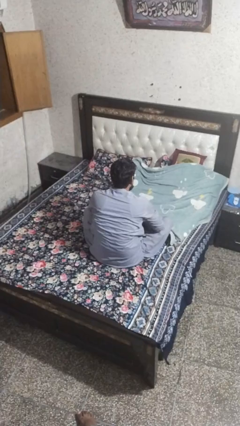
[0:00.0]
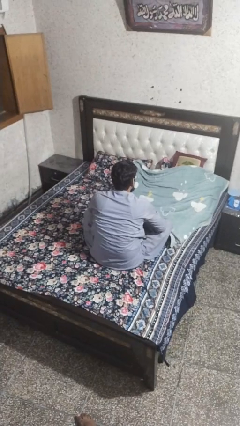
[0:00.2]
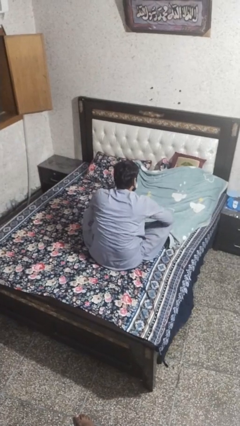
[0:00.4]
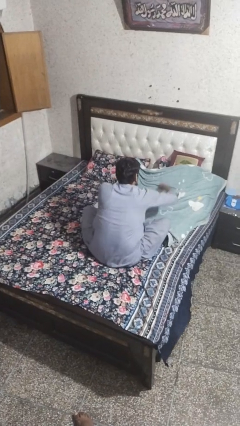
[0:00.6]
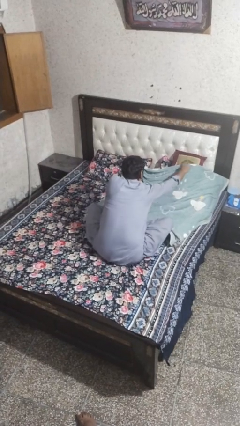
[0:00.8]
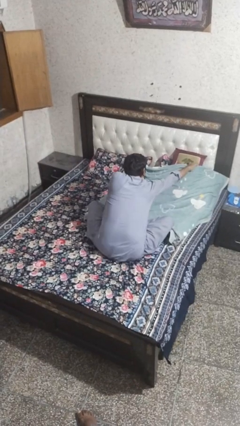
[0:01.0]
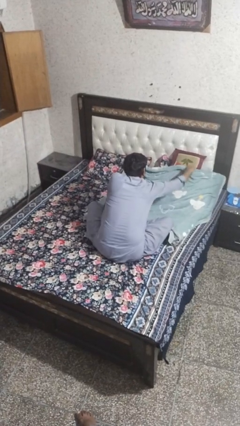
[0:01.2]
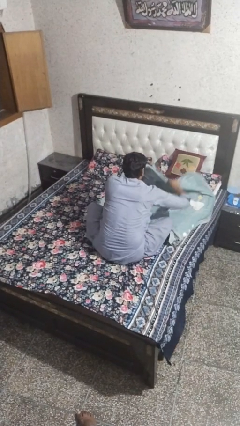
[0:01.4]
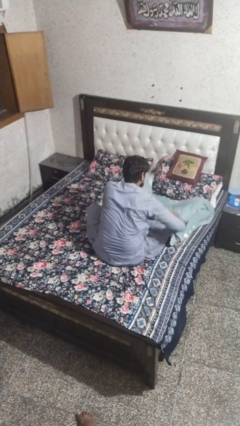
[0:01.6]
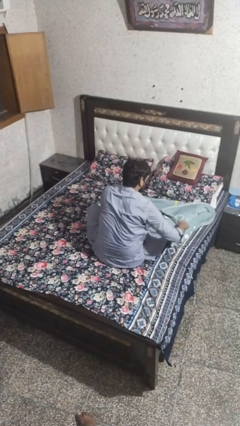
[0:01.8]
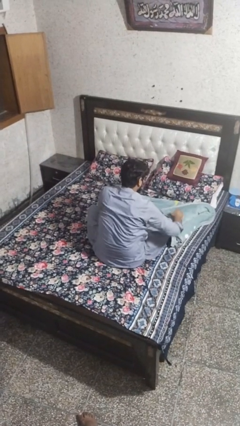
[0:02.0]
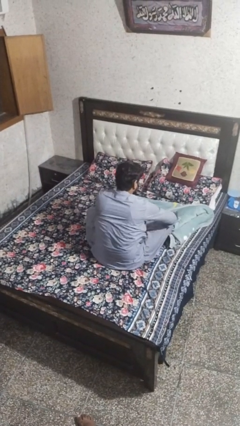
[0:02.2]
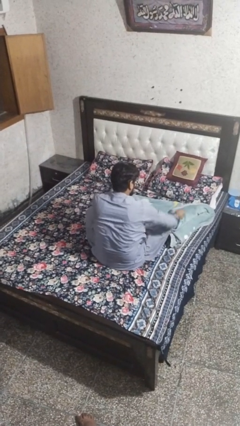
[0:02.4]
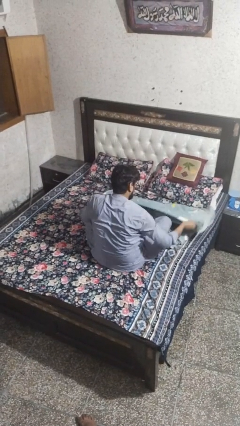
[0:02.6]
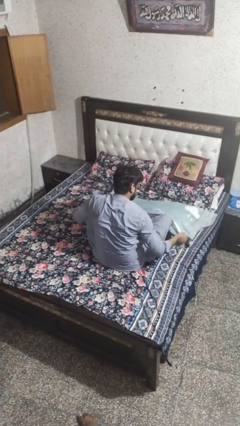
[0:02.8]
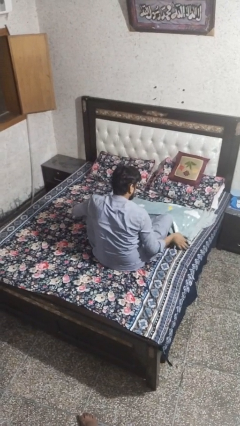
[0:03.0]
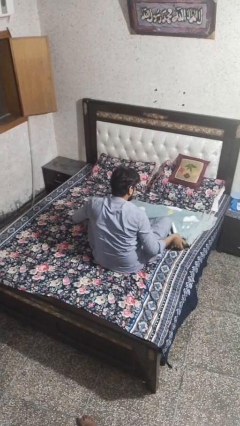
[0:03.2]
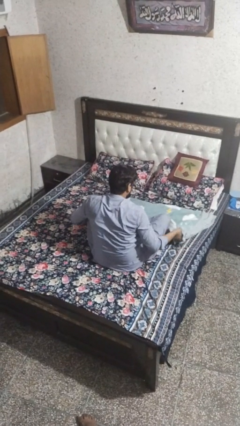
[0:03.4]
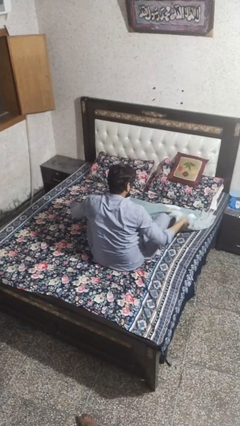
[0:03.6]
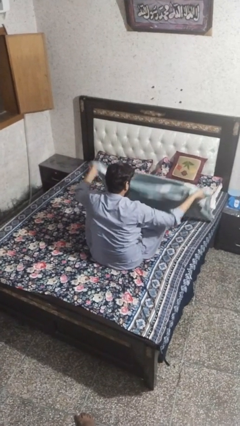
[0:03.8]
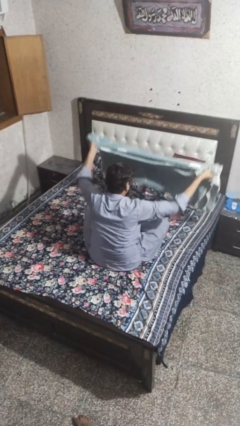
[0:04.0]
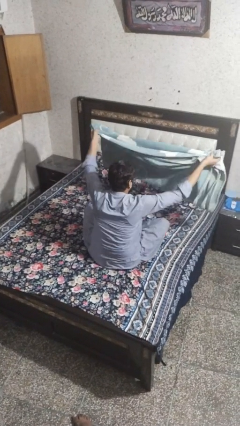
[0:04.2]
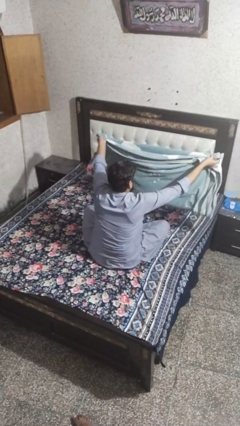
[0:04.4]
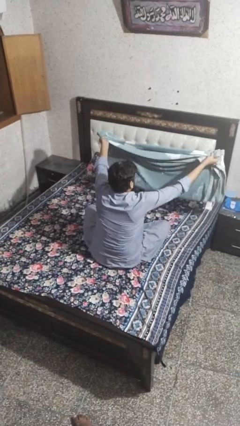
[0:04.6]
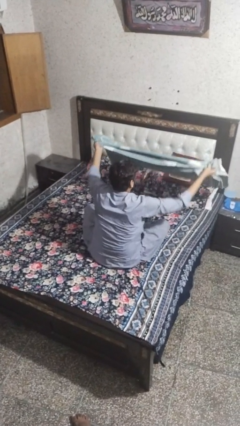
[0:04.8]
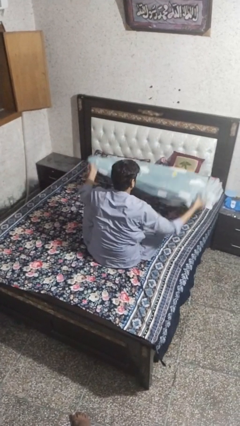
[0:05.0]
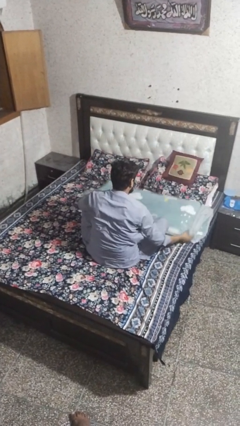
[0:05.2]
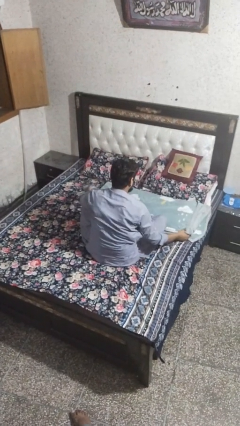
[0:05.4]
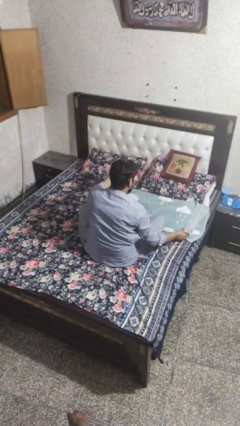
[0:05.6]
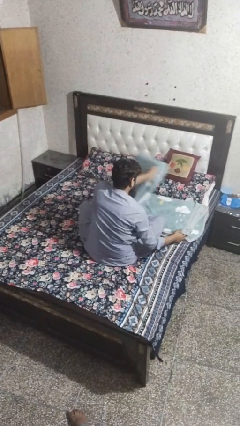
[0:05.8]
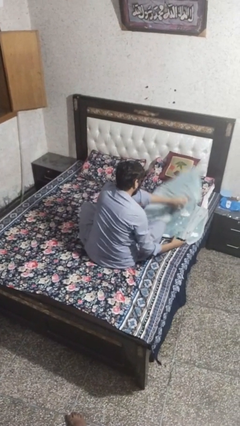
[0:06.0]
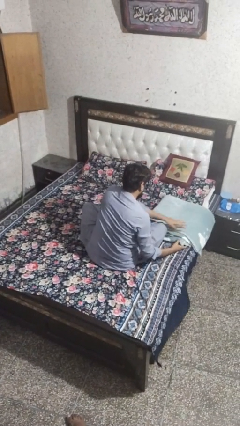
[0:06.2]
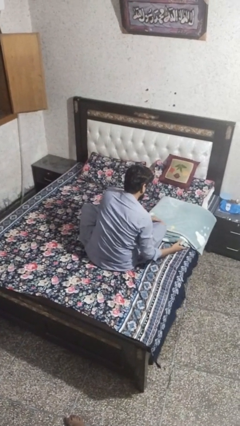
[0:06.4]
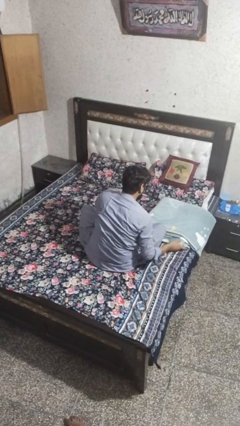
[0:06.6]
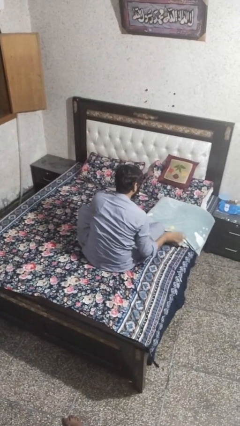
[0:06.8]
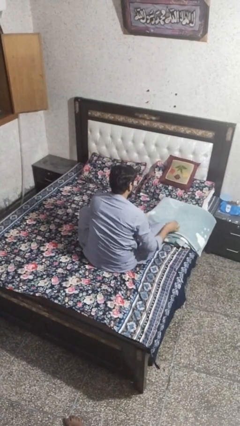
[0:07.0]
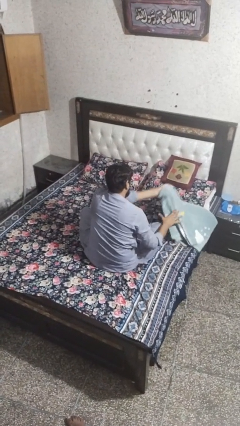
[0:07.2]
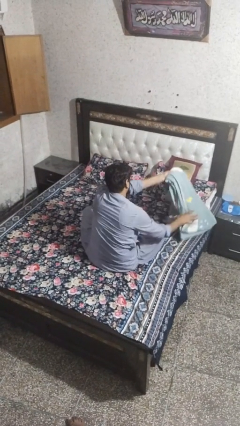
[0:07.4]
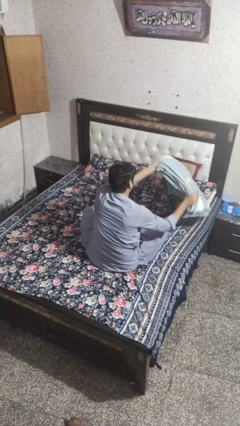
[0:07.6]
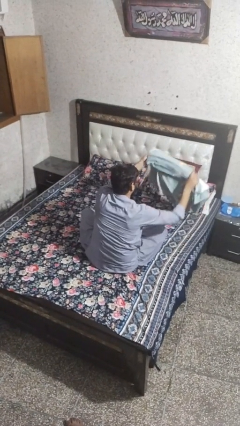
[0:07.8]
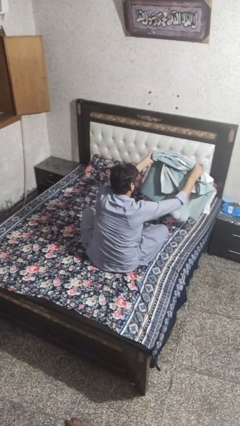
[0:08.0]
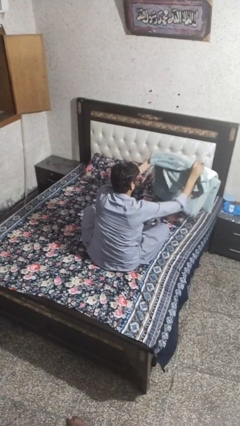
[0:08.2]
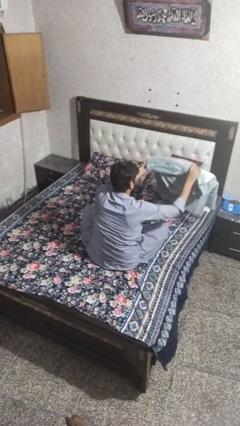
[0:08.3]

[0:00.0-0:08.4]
person folds blanket

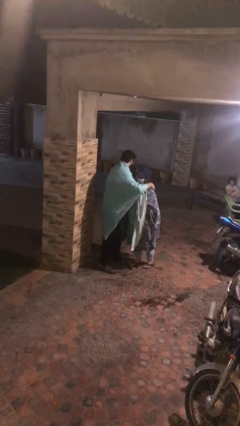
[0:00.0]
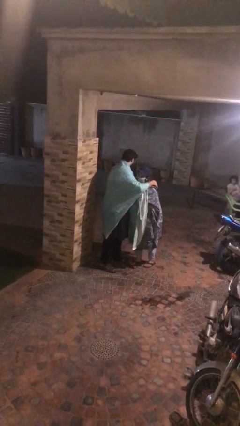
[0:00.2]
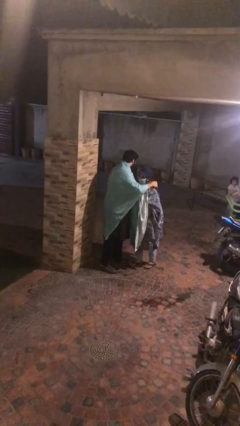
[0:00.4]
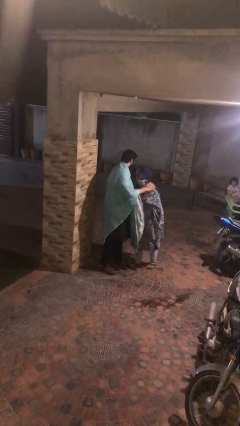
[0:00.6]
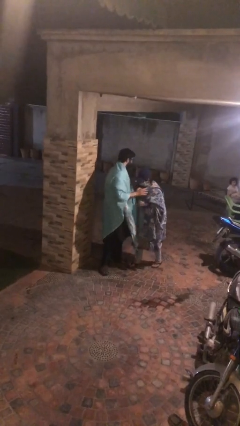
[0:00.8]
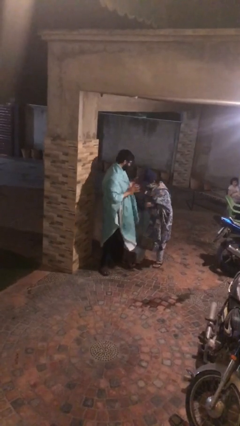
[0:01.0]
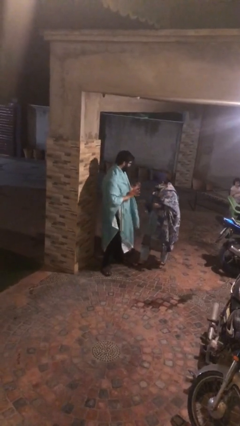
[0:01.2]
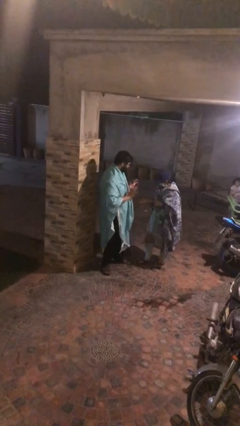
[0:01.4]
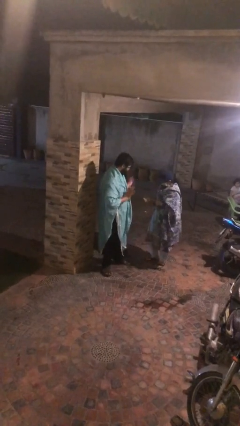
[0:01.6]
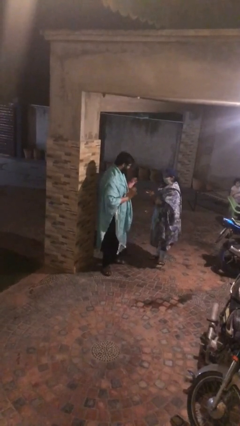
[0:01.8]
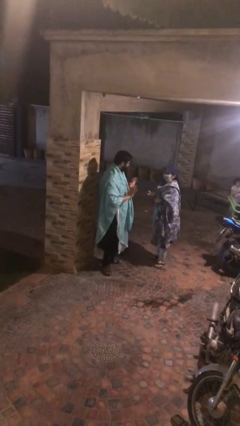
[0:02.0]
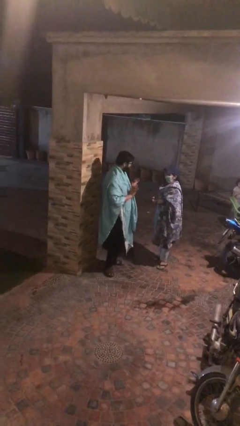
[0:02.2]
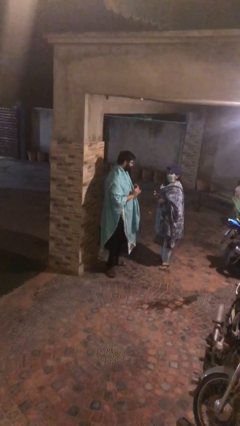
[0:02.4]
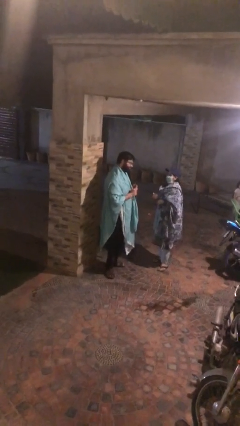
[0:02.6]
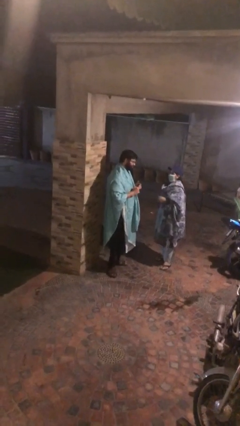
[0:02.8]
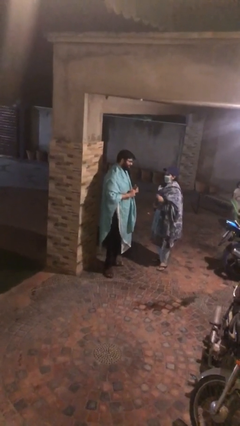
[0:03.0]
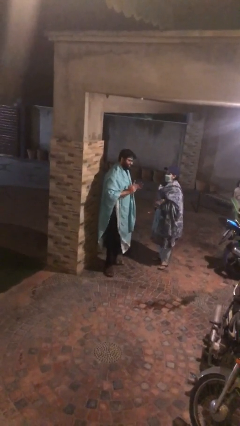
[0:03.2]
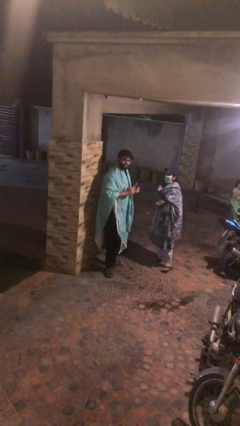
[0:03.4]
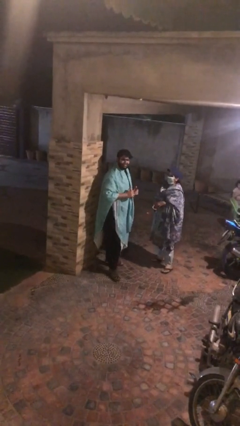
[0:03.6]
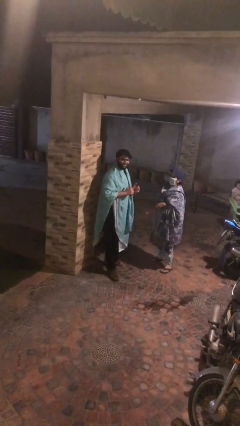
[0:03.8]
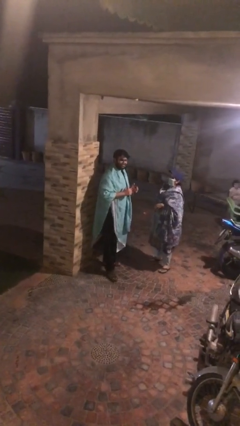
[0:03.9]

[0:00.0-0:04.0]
person talks to person

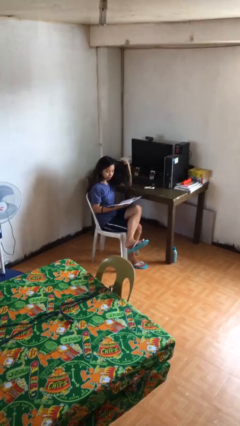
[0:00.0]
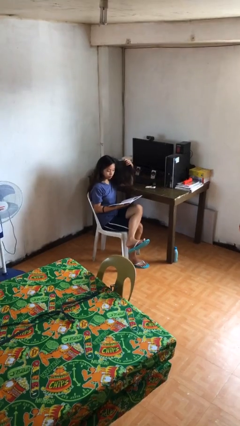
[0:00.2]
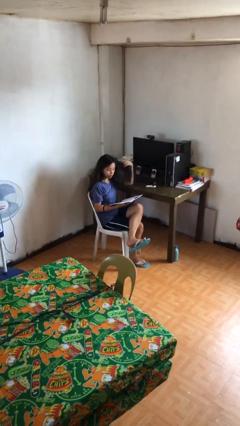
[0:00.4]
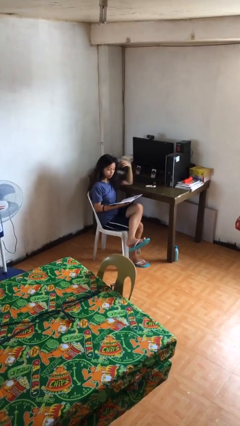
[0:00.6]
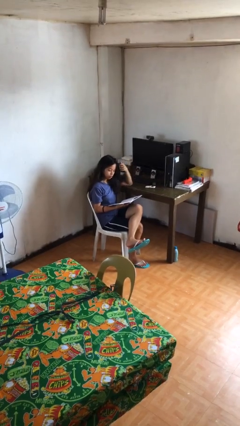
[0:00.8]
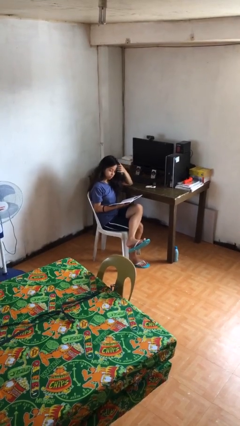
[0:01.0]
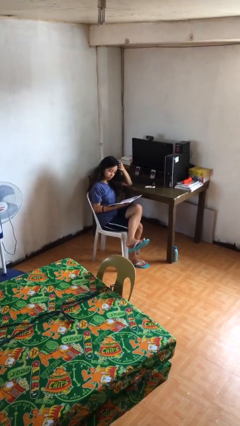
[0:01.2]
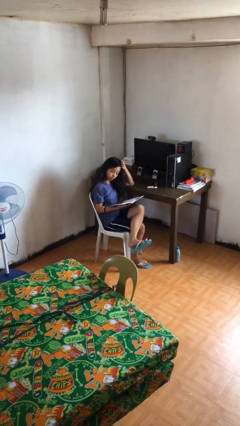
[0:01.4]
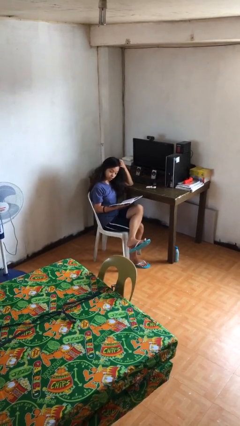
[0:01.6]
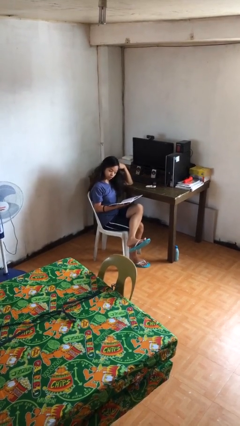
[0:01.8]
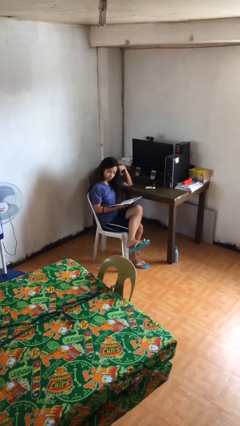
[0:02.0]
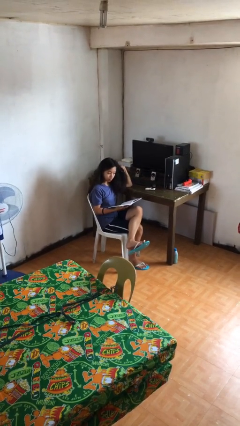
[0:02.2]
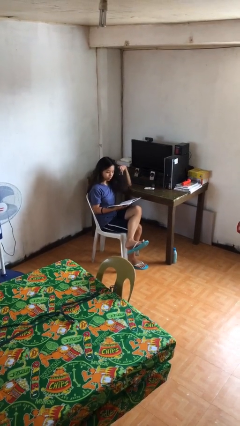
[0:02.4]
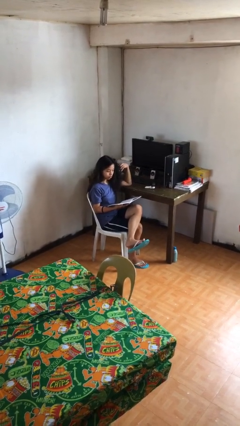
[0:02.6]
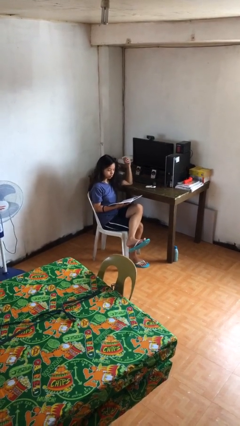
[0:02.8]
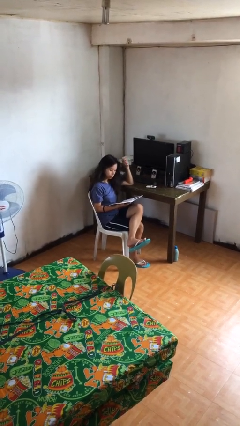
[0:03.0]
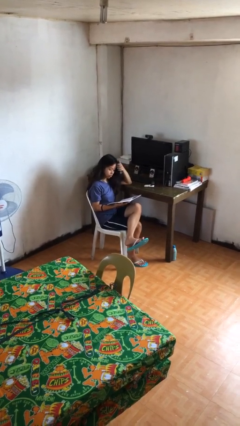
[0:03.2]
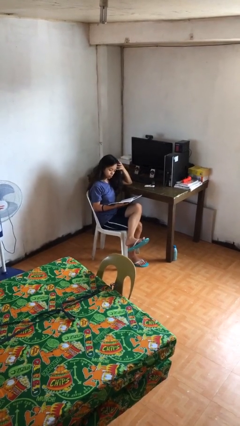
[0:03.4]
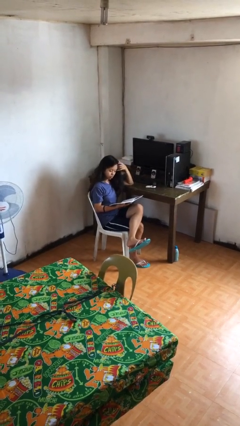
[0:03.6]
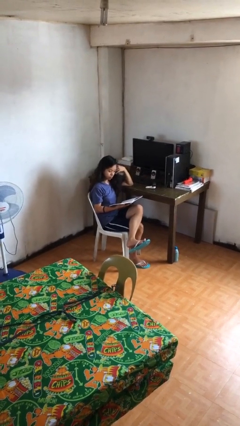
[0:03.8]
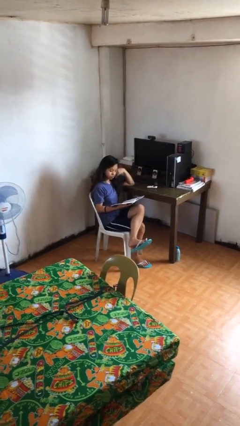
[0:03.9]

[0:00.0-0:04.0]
person reads document

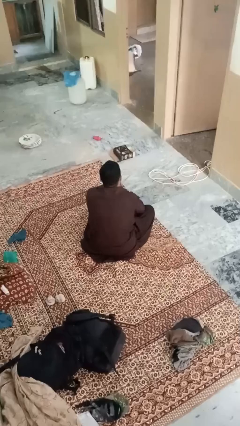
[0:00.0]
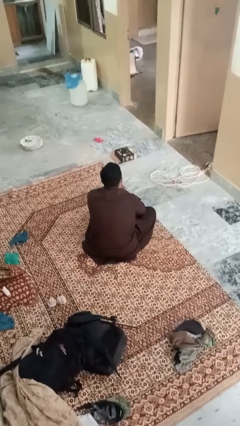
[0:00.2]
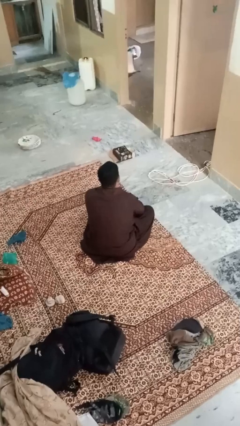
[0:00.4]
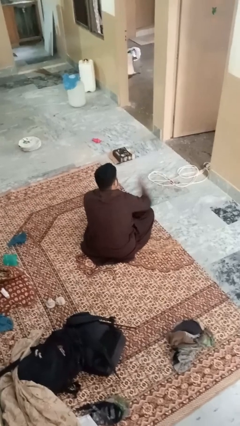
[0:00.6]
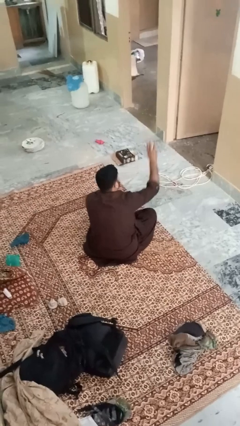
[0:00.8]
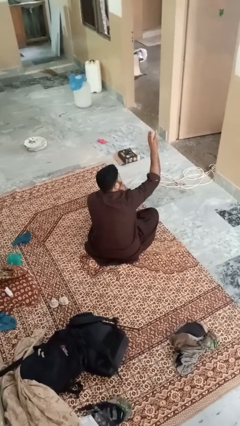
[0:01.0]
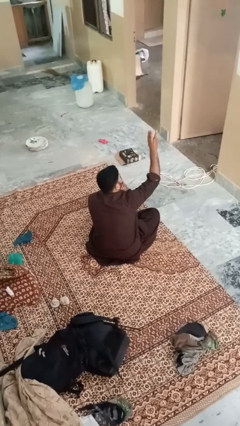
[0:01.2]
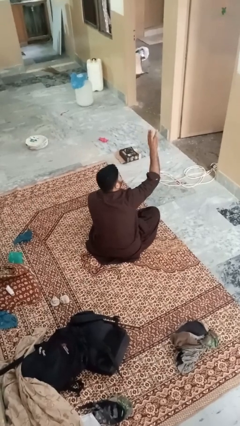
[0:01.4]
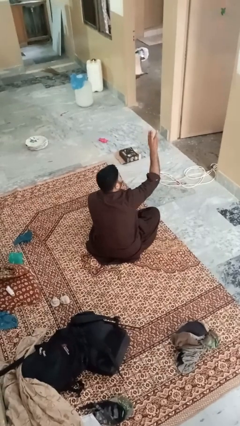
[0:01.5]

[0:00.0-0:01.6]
person gestures number three
